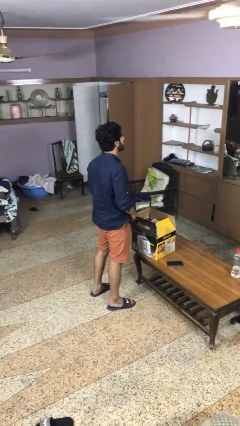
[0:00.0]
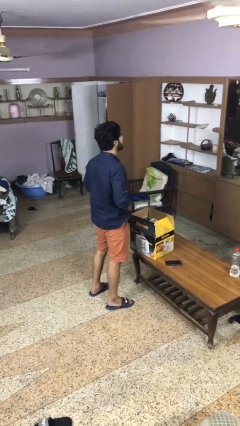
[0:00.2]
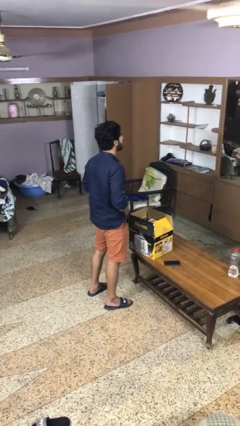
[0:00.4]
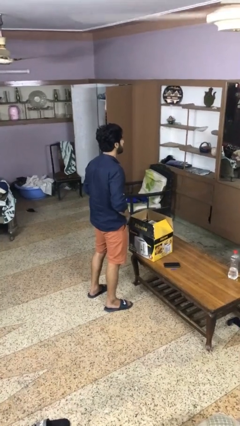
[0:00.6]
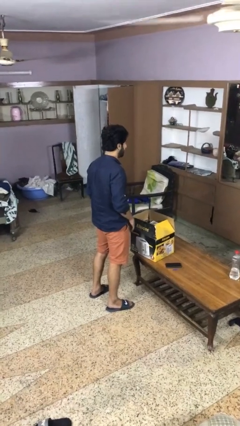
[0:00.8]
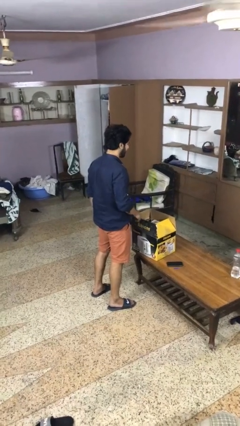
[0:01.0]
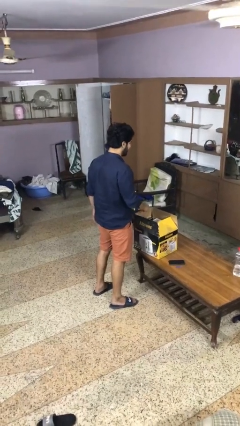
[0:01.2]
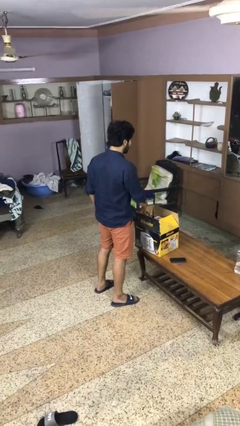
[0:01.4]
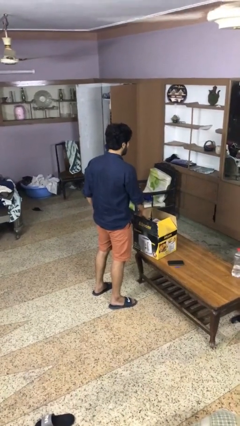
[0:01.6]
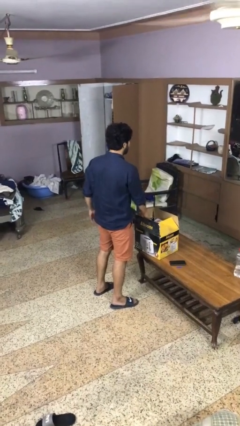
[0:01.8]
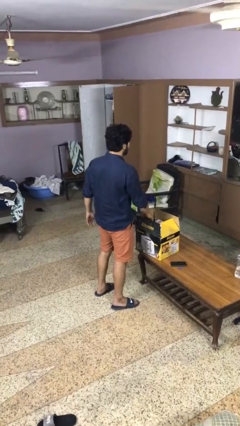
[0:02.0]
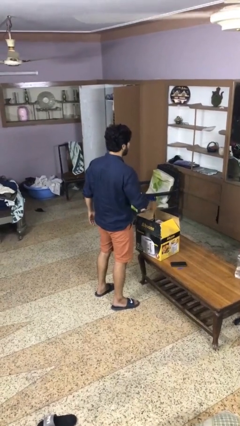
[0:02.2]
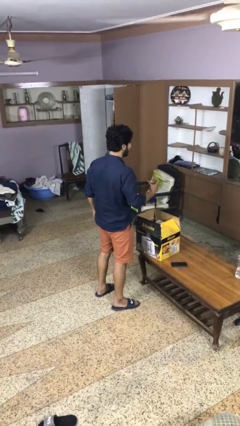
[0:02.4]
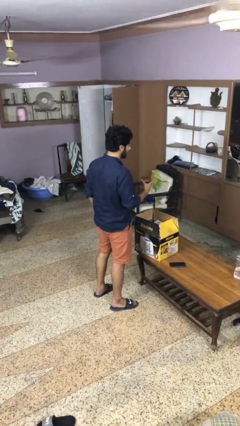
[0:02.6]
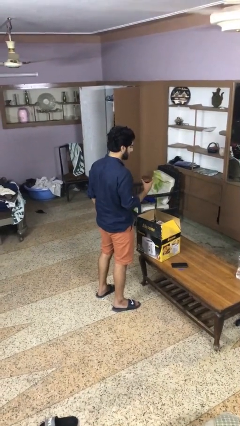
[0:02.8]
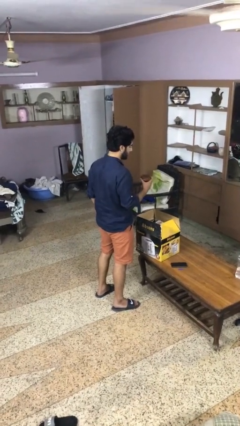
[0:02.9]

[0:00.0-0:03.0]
person takes object from box

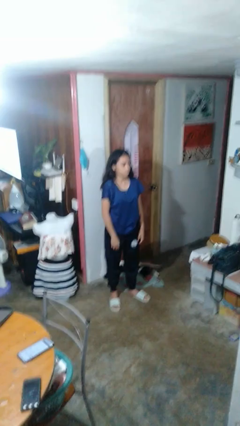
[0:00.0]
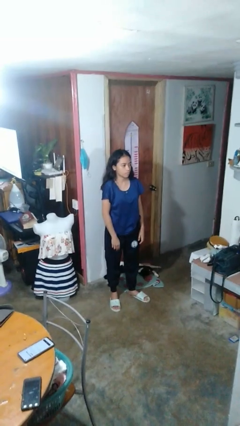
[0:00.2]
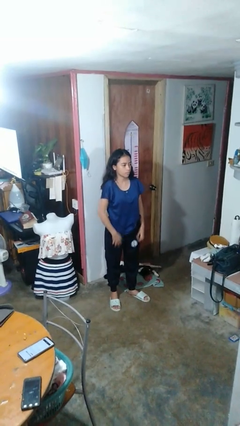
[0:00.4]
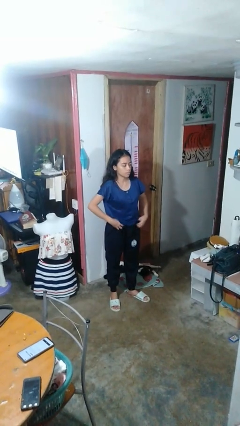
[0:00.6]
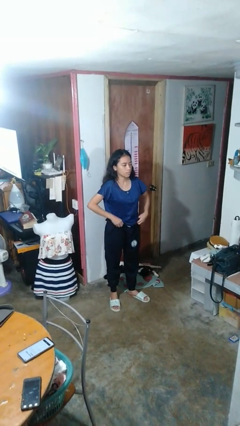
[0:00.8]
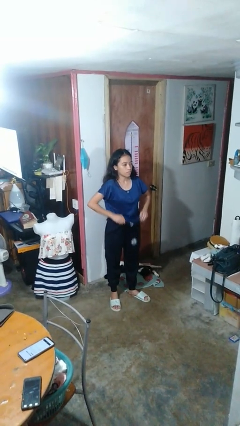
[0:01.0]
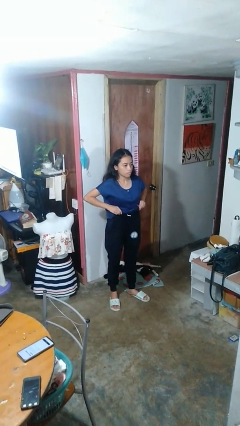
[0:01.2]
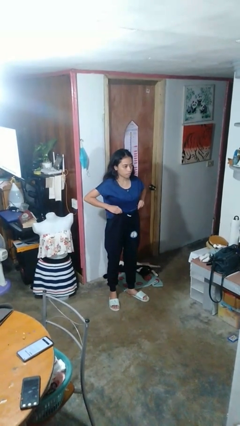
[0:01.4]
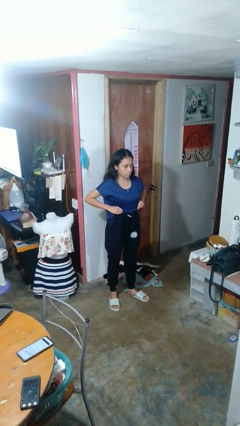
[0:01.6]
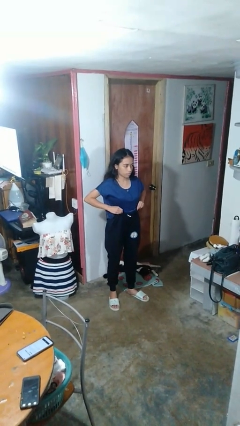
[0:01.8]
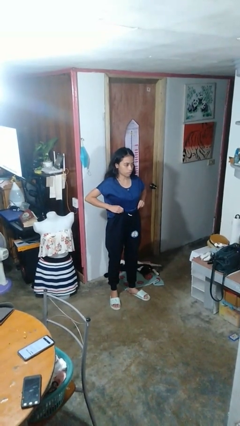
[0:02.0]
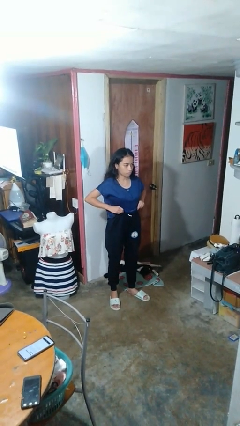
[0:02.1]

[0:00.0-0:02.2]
person hikes up pants

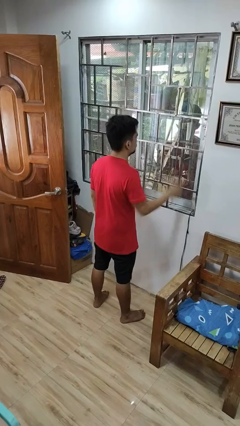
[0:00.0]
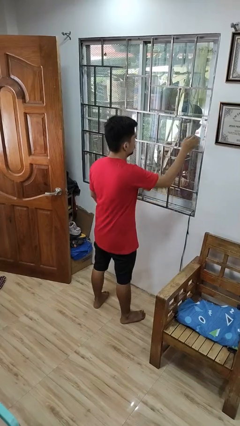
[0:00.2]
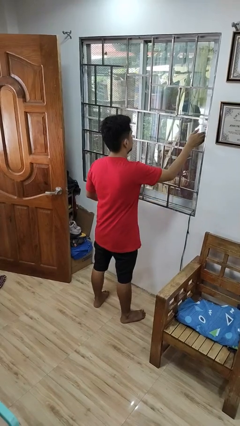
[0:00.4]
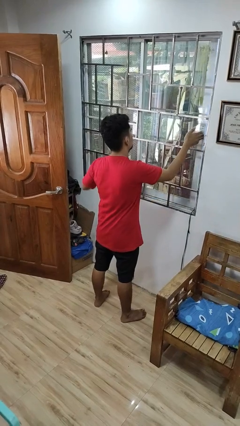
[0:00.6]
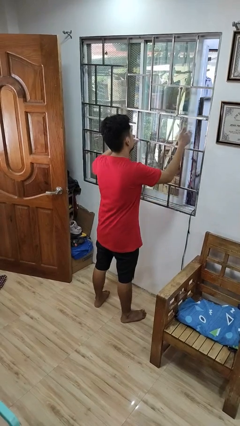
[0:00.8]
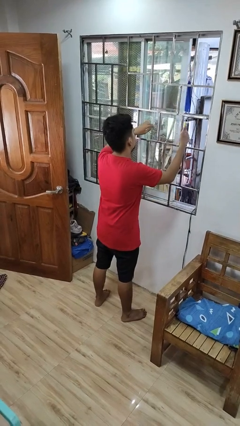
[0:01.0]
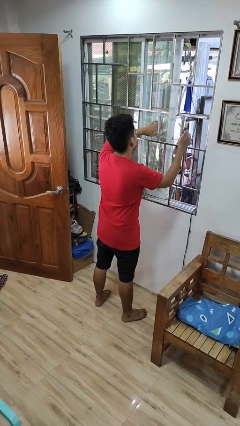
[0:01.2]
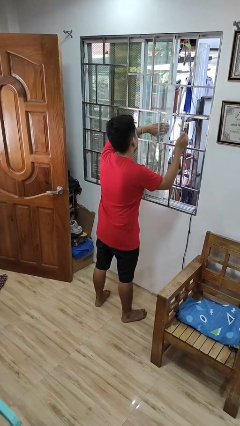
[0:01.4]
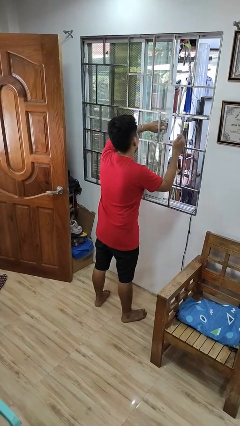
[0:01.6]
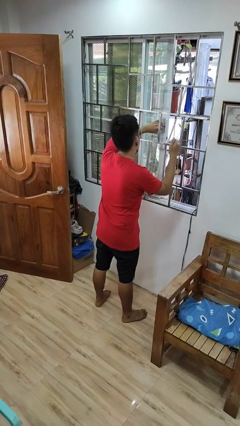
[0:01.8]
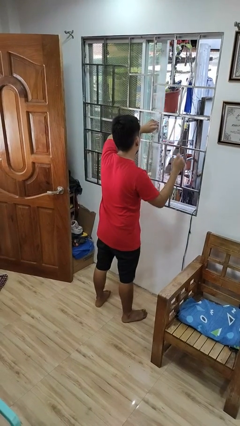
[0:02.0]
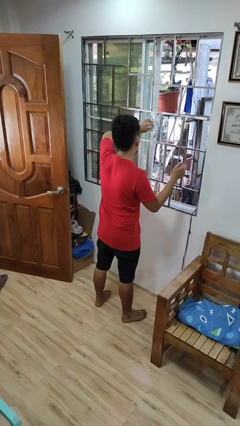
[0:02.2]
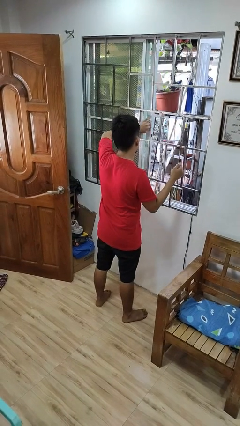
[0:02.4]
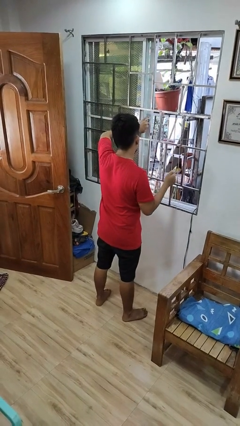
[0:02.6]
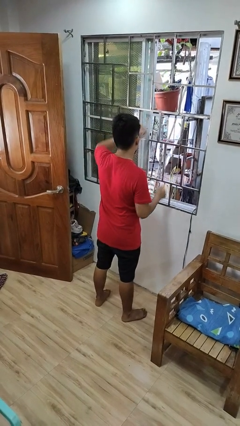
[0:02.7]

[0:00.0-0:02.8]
person opens home window

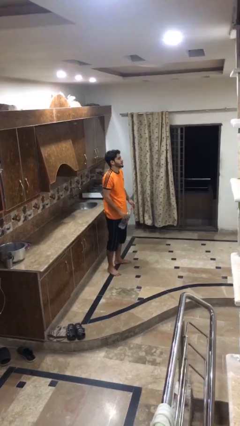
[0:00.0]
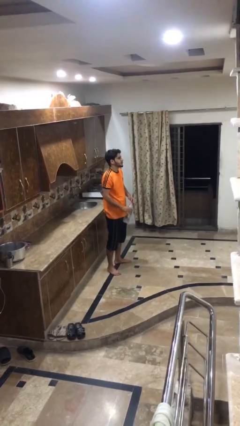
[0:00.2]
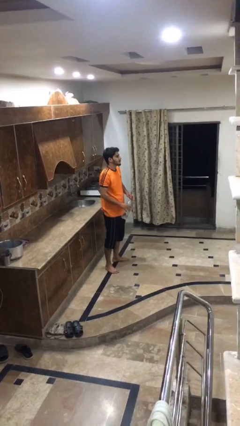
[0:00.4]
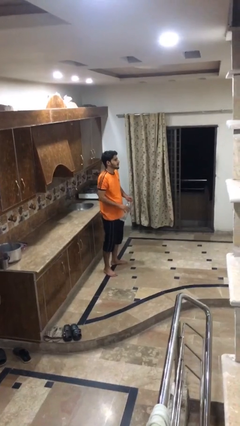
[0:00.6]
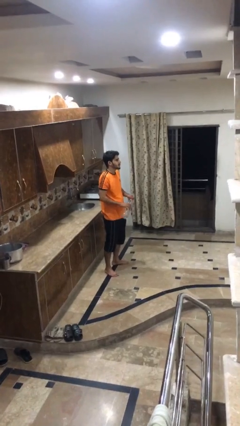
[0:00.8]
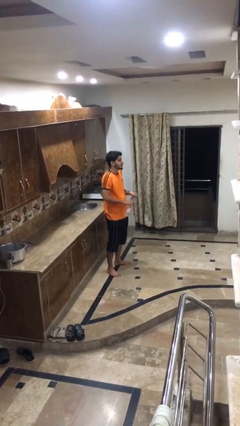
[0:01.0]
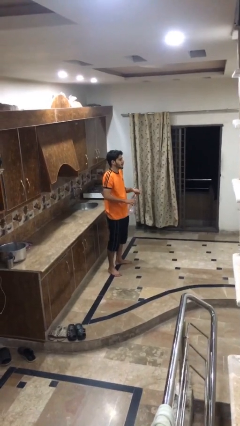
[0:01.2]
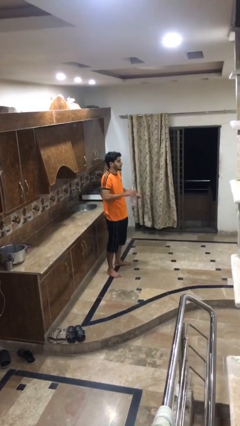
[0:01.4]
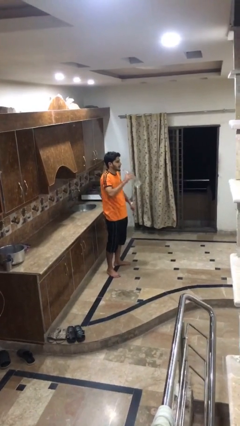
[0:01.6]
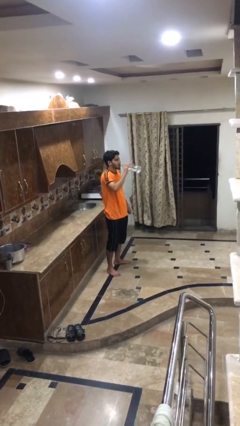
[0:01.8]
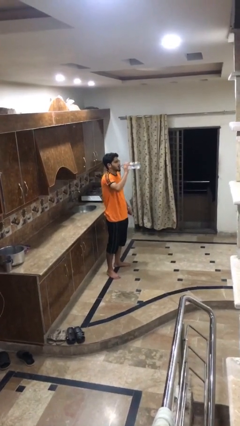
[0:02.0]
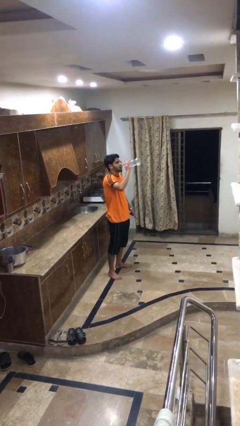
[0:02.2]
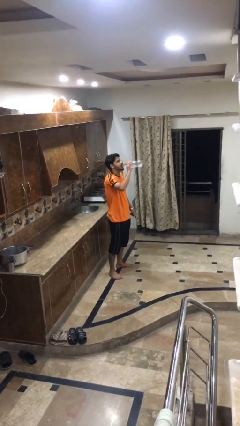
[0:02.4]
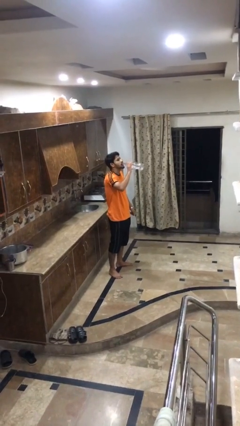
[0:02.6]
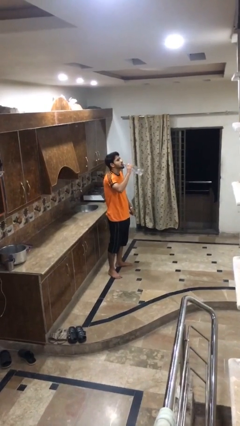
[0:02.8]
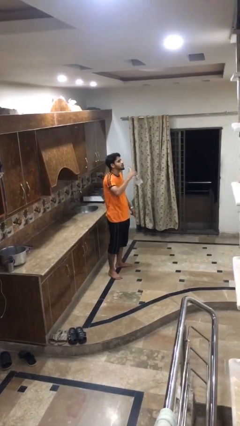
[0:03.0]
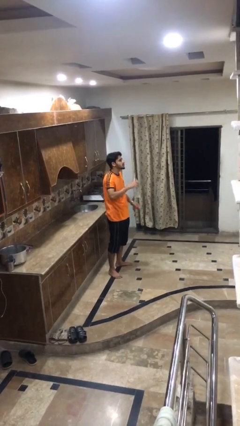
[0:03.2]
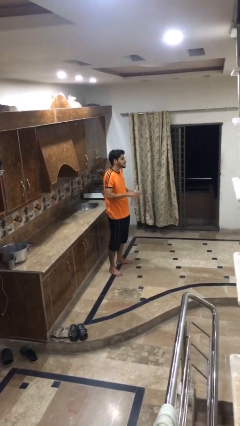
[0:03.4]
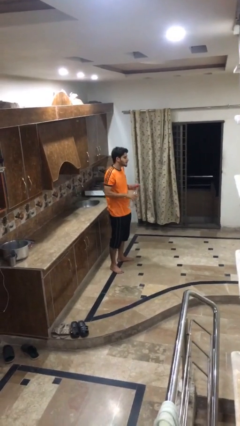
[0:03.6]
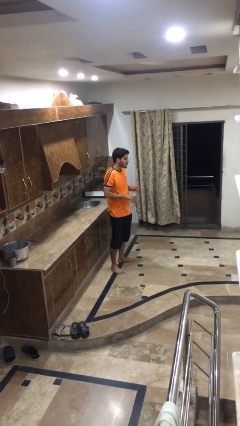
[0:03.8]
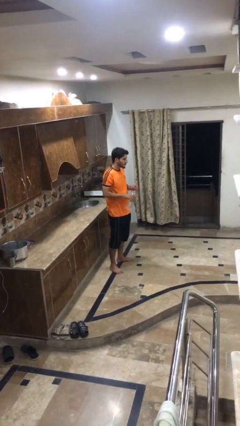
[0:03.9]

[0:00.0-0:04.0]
person drinks from bottle

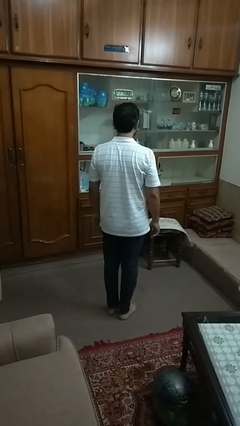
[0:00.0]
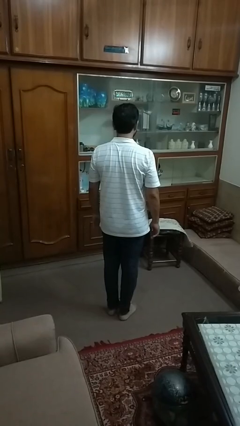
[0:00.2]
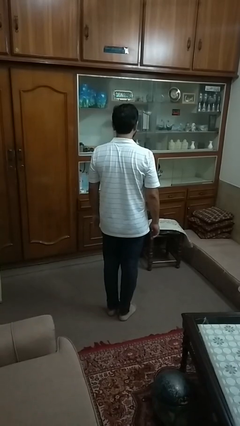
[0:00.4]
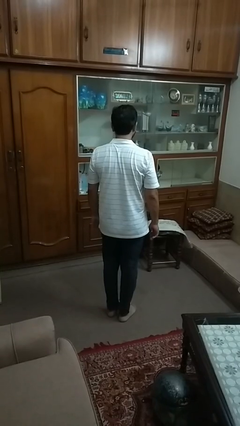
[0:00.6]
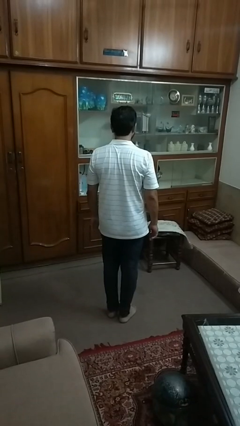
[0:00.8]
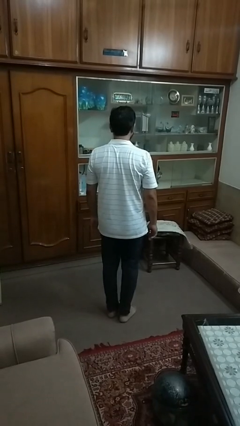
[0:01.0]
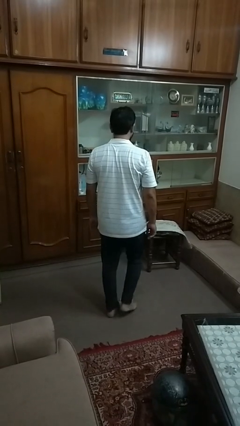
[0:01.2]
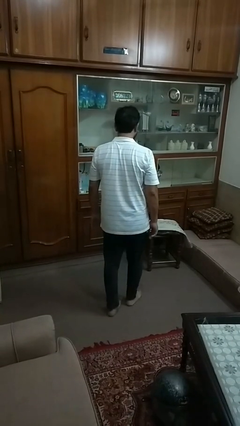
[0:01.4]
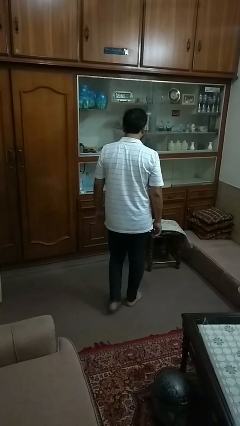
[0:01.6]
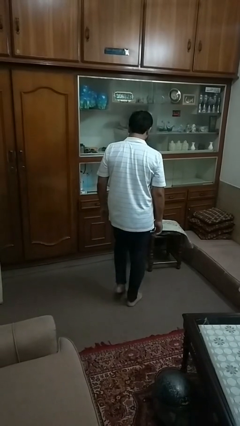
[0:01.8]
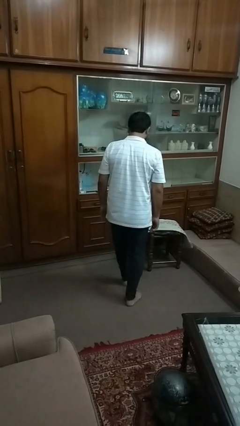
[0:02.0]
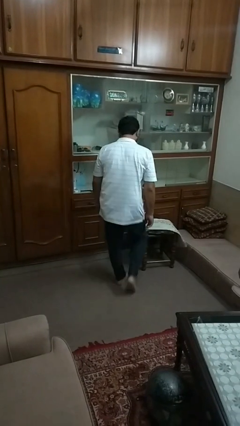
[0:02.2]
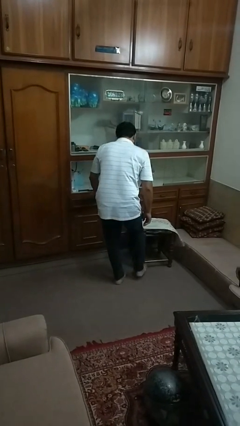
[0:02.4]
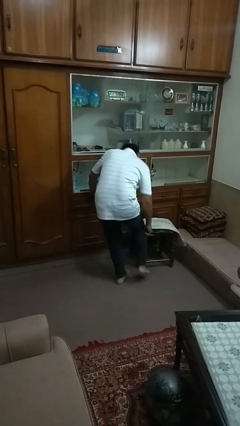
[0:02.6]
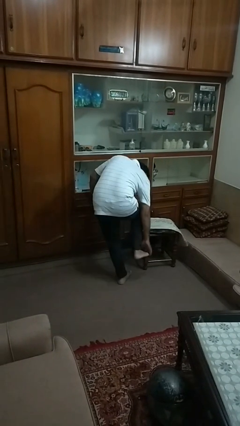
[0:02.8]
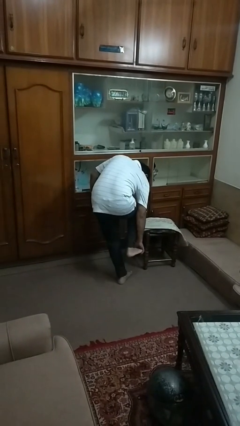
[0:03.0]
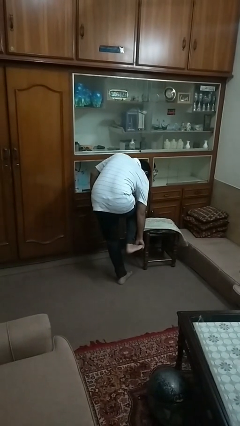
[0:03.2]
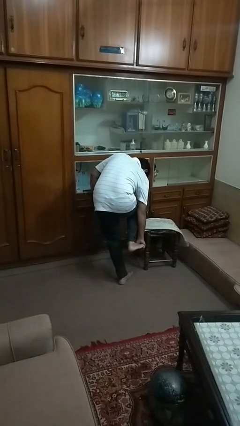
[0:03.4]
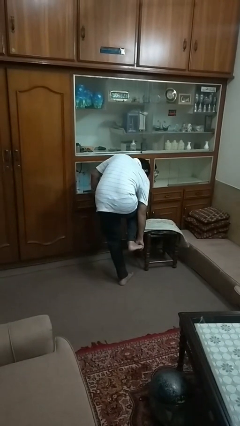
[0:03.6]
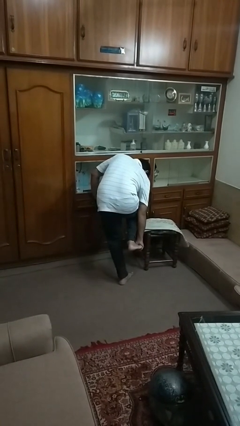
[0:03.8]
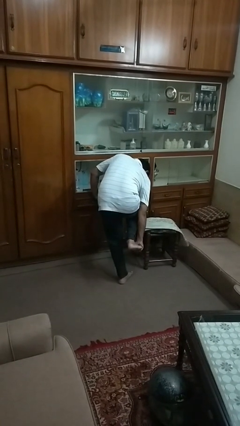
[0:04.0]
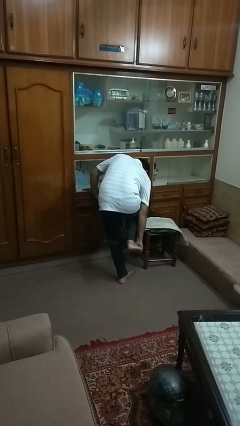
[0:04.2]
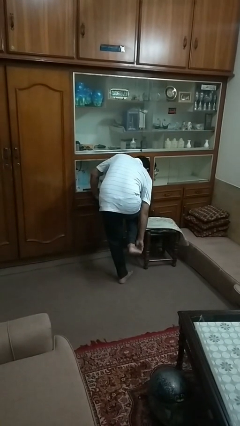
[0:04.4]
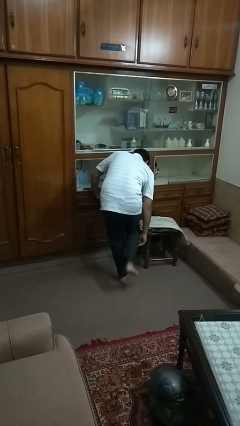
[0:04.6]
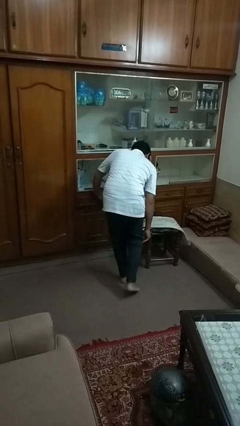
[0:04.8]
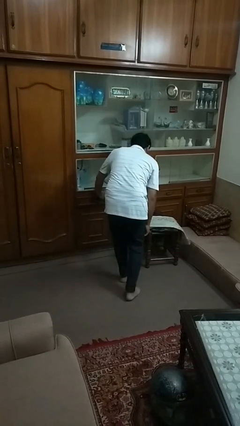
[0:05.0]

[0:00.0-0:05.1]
person stubs toe

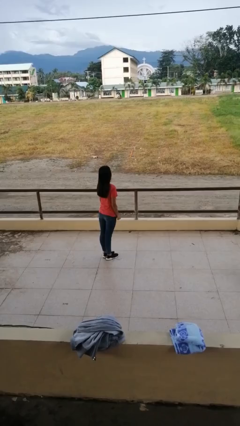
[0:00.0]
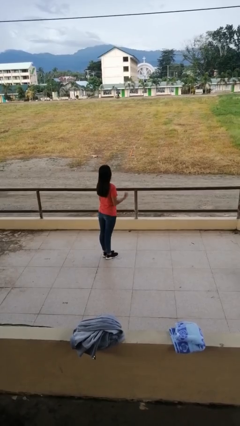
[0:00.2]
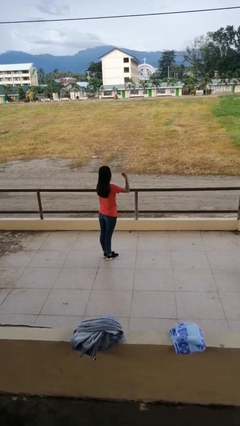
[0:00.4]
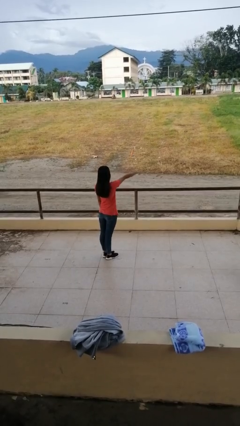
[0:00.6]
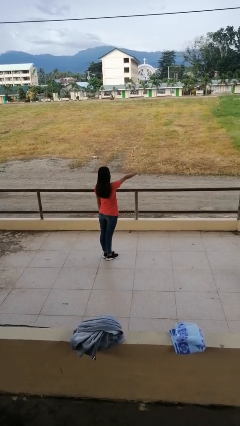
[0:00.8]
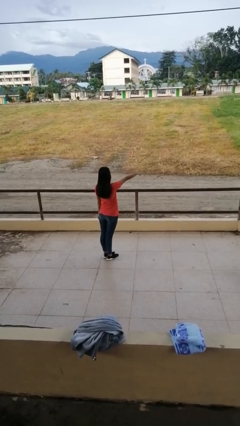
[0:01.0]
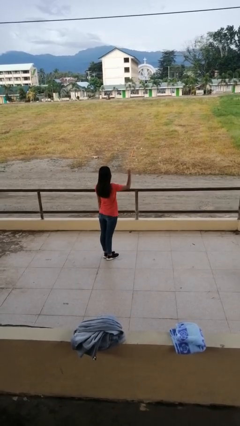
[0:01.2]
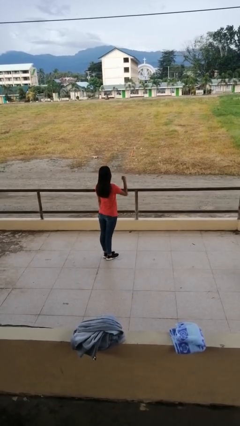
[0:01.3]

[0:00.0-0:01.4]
person punches
